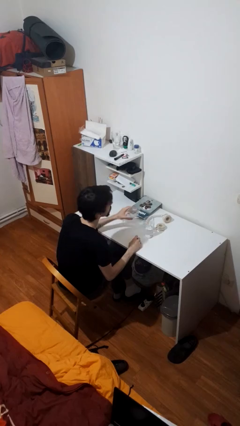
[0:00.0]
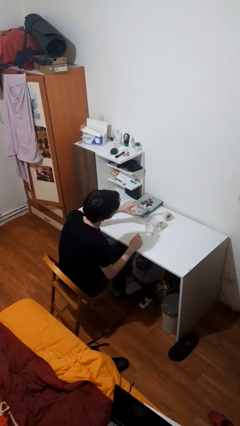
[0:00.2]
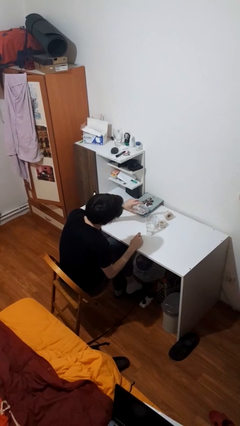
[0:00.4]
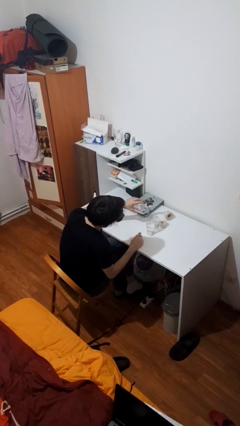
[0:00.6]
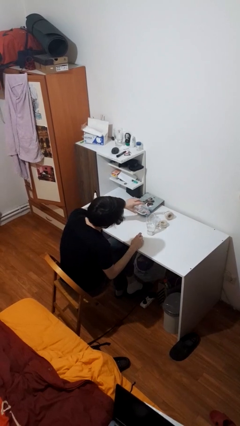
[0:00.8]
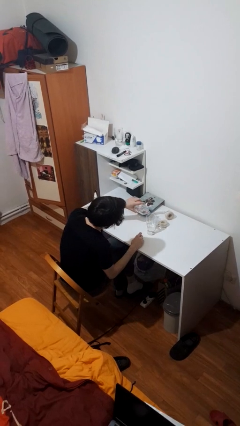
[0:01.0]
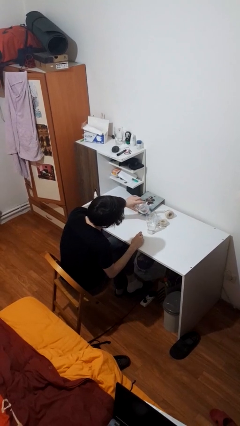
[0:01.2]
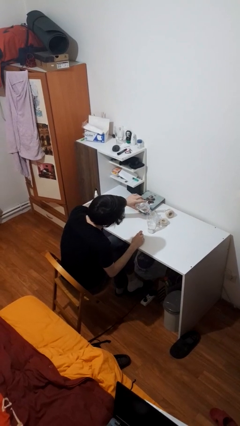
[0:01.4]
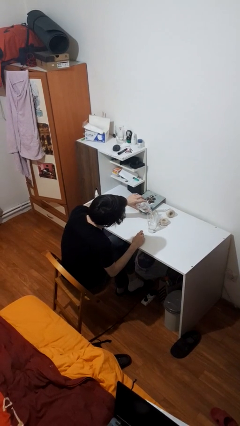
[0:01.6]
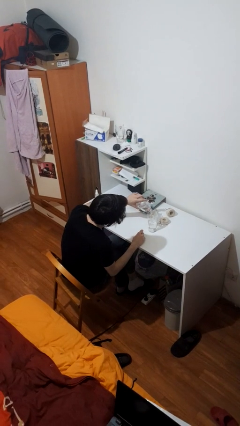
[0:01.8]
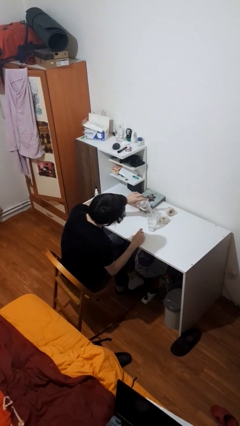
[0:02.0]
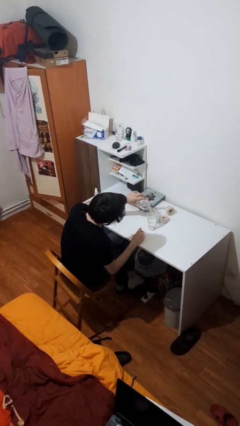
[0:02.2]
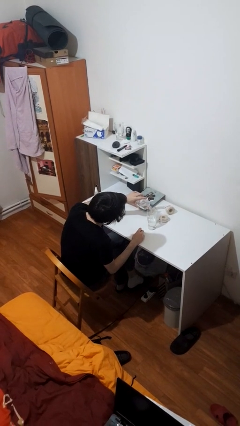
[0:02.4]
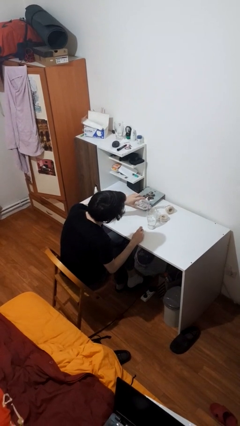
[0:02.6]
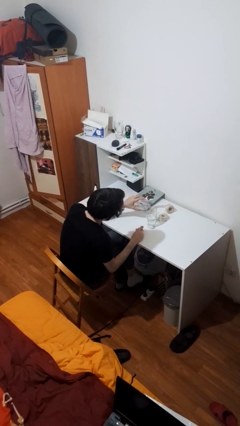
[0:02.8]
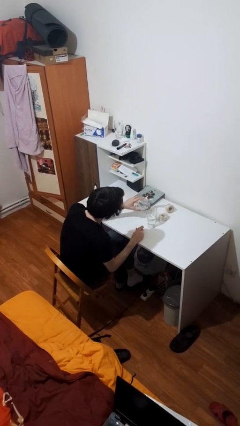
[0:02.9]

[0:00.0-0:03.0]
person pours liquid into cup

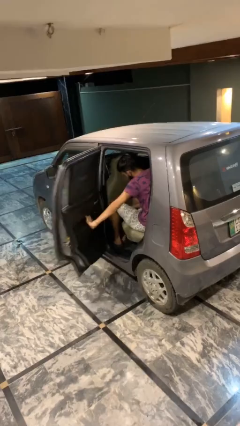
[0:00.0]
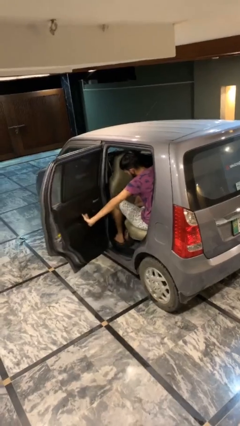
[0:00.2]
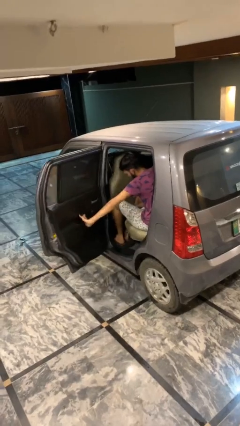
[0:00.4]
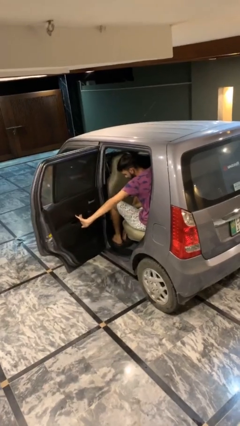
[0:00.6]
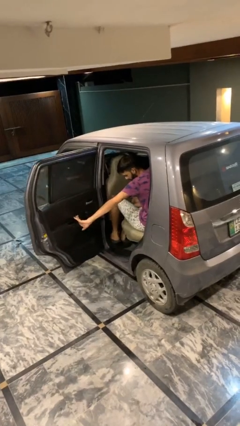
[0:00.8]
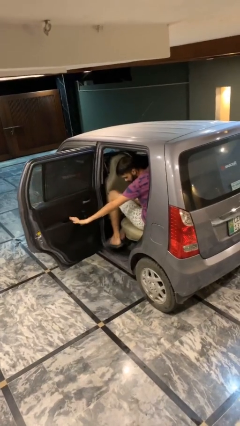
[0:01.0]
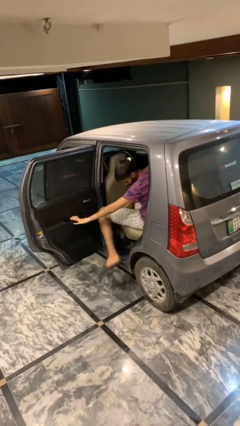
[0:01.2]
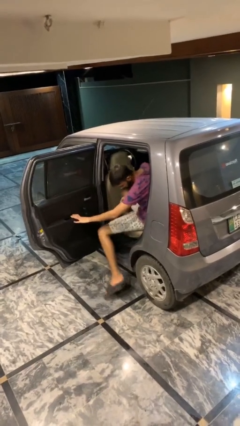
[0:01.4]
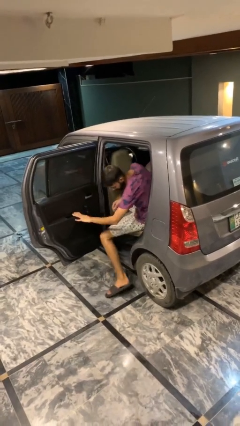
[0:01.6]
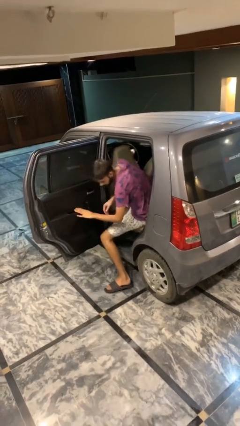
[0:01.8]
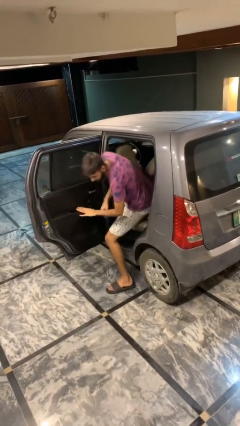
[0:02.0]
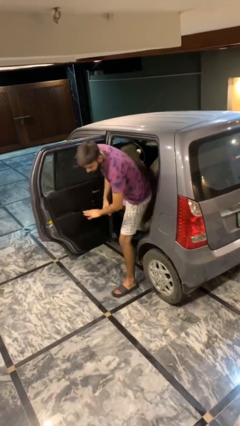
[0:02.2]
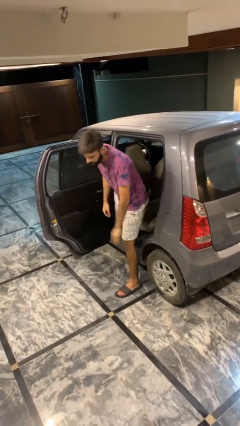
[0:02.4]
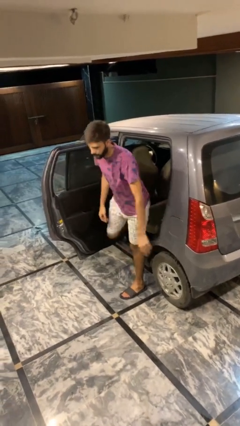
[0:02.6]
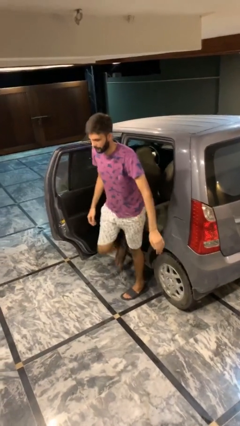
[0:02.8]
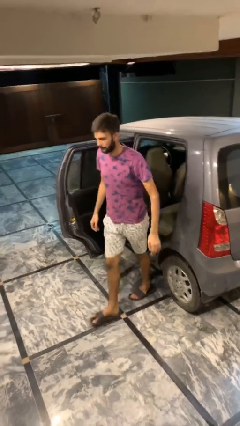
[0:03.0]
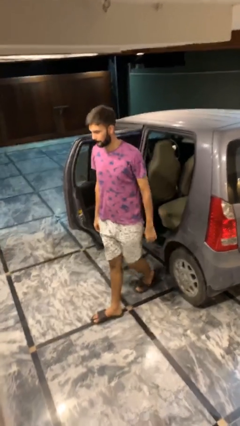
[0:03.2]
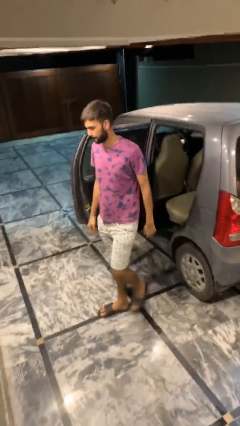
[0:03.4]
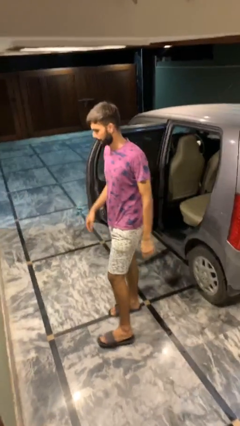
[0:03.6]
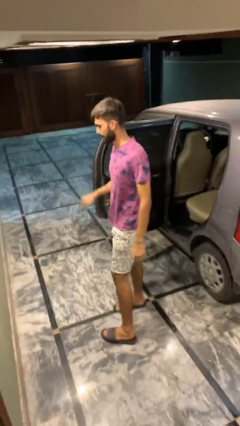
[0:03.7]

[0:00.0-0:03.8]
person exits car

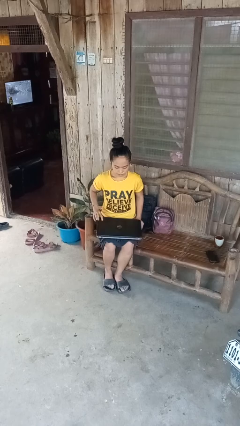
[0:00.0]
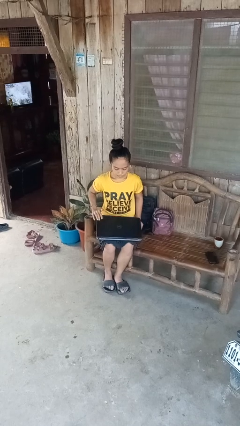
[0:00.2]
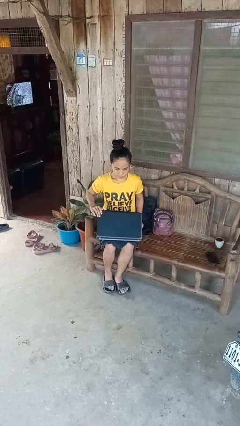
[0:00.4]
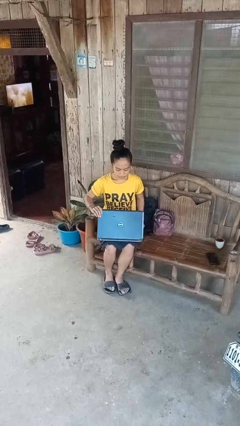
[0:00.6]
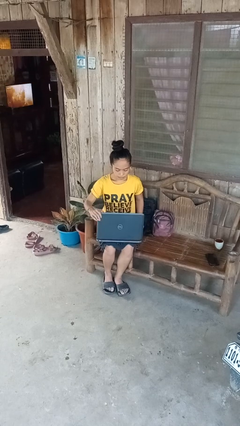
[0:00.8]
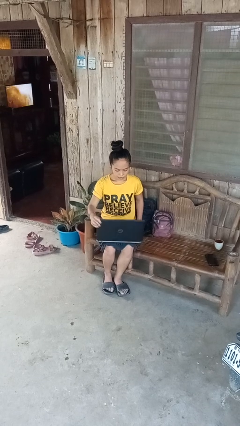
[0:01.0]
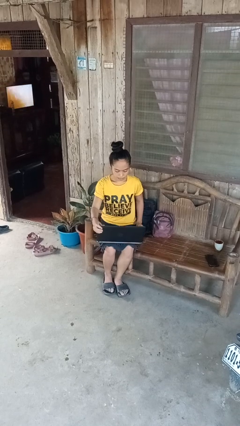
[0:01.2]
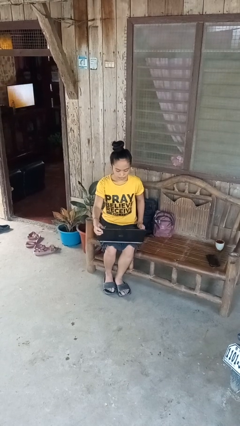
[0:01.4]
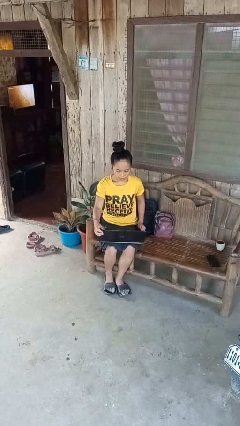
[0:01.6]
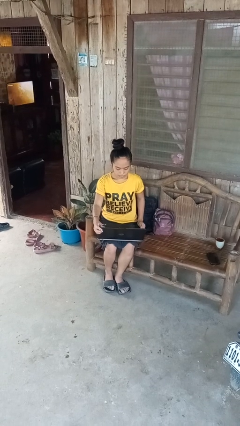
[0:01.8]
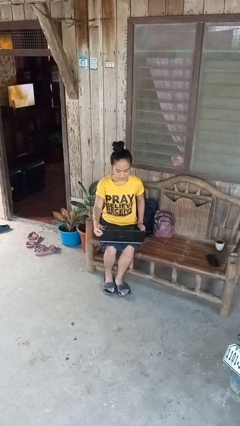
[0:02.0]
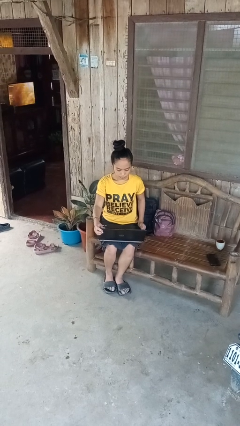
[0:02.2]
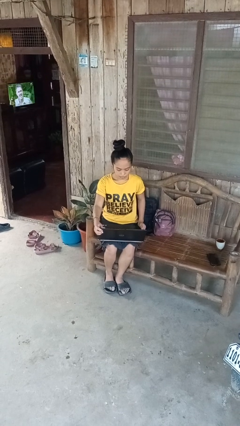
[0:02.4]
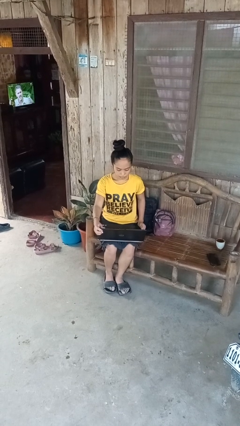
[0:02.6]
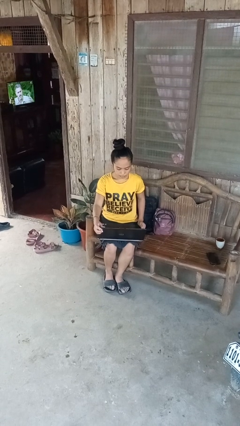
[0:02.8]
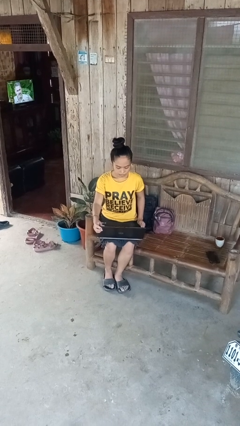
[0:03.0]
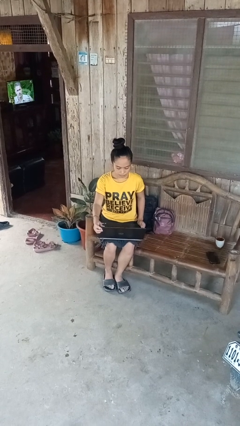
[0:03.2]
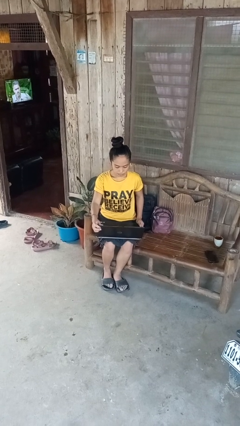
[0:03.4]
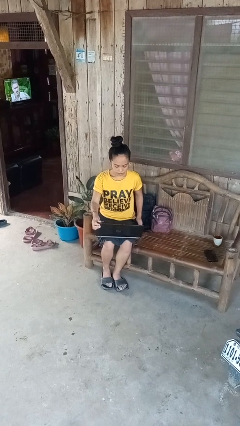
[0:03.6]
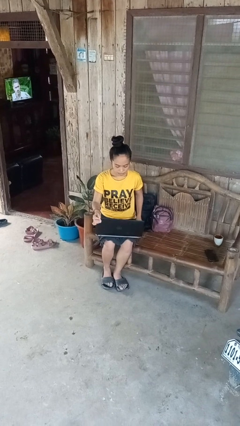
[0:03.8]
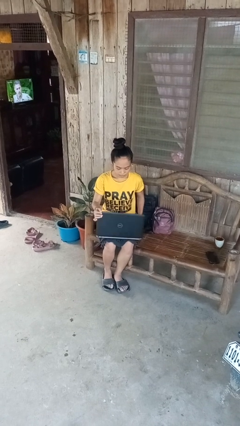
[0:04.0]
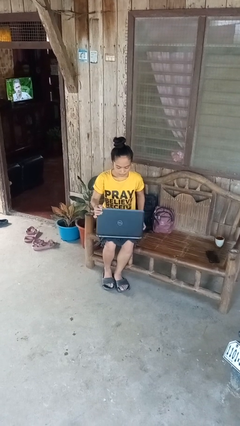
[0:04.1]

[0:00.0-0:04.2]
person opens laptop

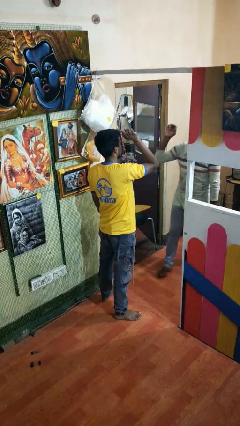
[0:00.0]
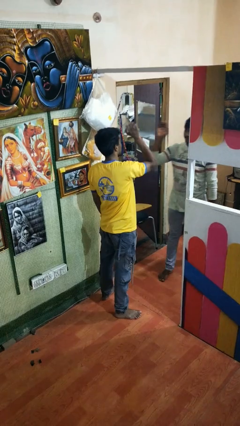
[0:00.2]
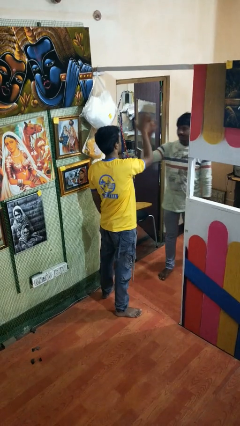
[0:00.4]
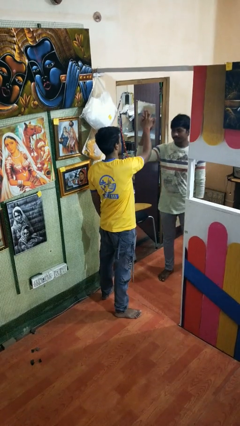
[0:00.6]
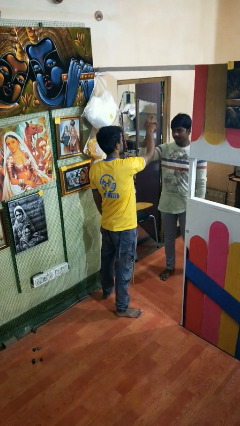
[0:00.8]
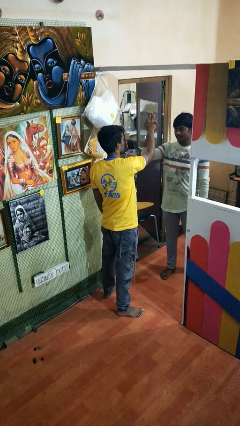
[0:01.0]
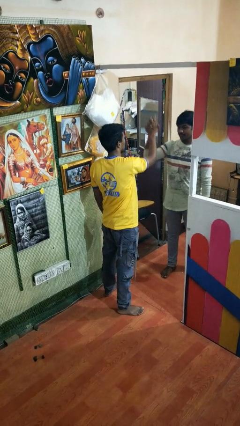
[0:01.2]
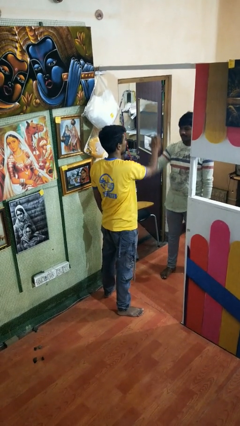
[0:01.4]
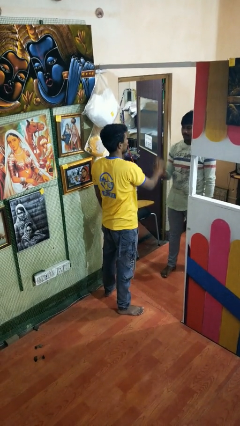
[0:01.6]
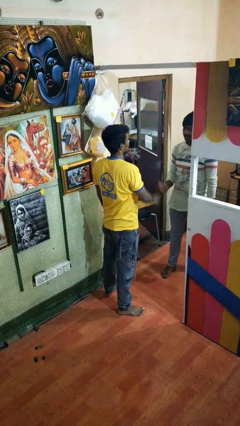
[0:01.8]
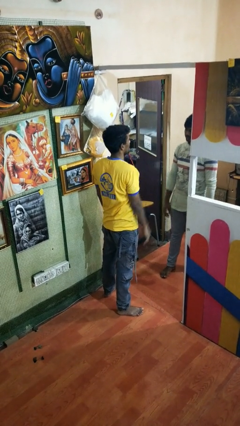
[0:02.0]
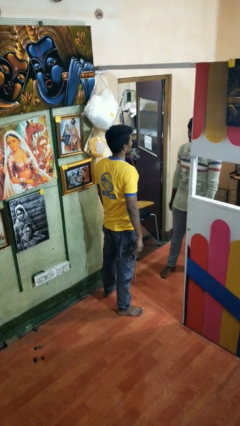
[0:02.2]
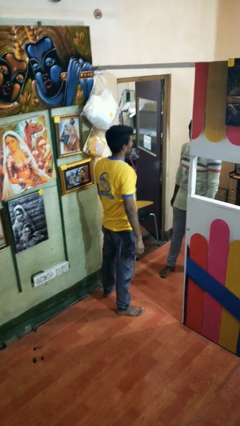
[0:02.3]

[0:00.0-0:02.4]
person highfives hand

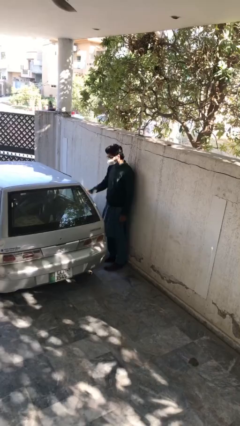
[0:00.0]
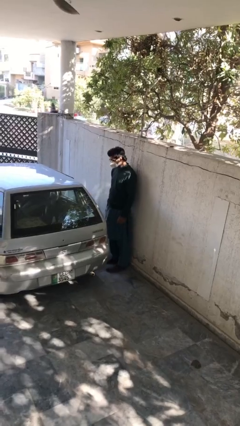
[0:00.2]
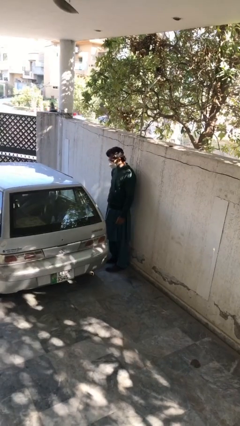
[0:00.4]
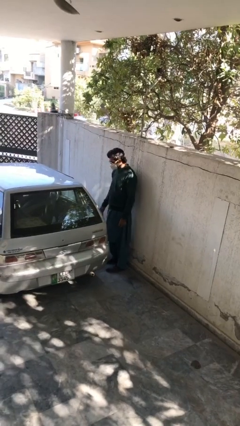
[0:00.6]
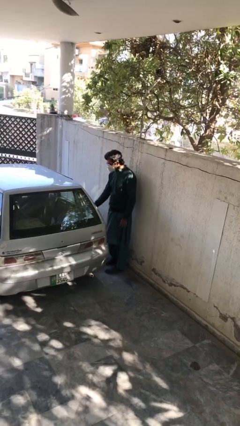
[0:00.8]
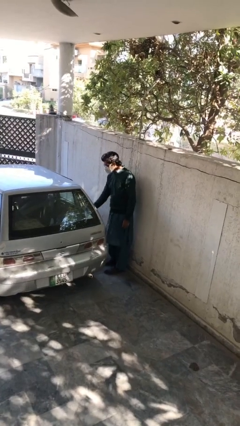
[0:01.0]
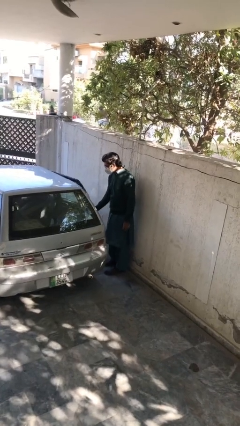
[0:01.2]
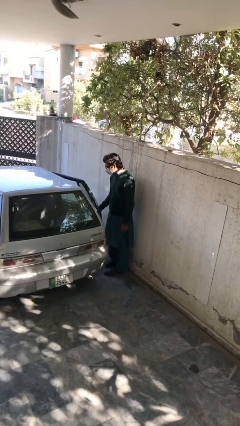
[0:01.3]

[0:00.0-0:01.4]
person opens car door

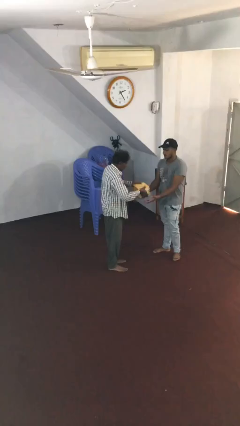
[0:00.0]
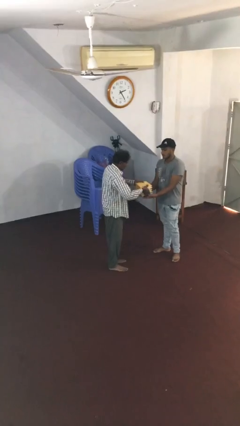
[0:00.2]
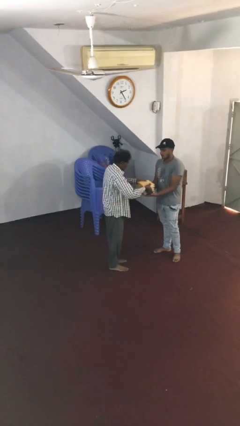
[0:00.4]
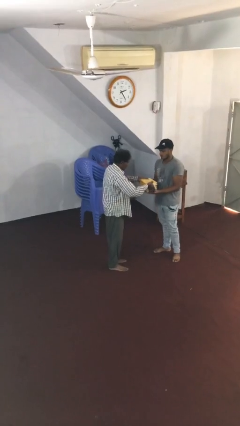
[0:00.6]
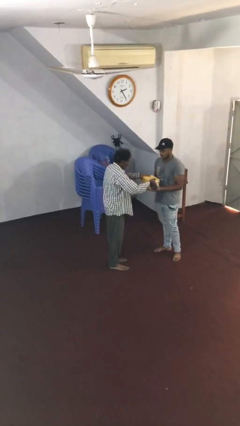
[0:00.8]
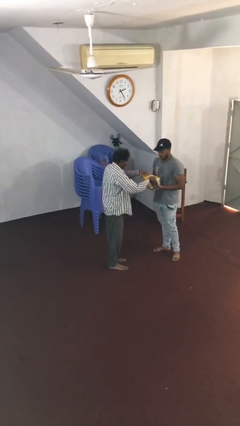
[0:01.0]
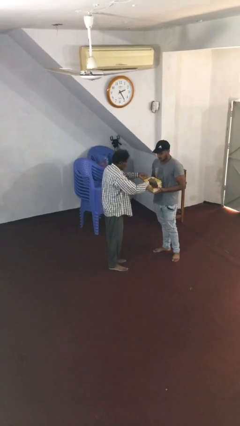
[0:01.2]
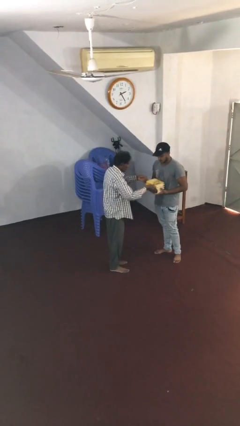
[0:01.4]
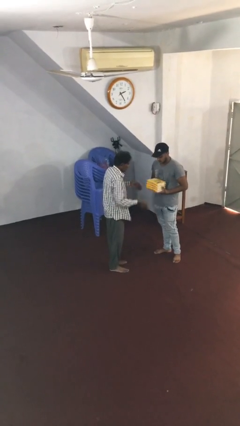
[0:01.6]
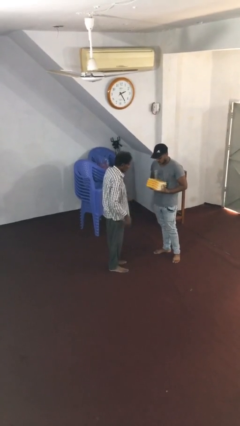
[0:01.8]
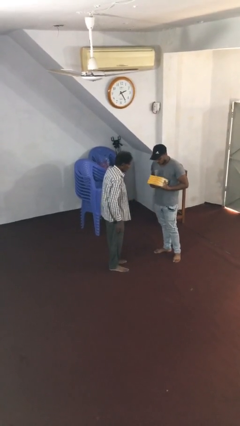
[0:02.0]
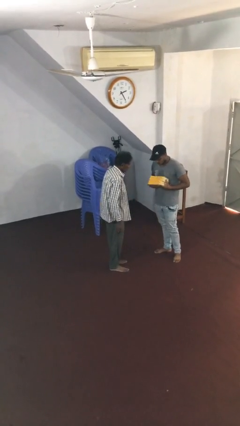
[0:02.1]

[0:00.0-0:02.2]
person transfers object to person
